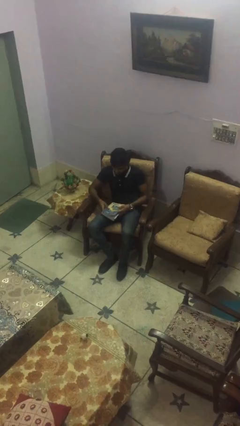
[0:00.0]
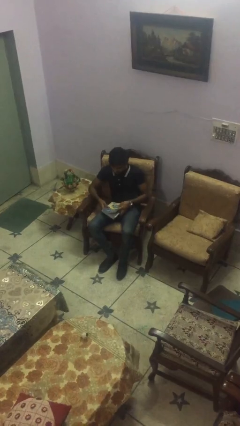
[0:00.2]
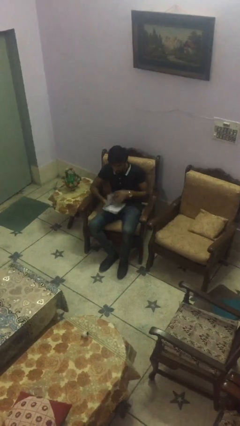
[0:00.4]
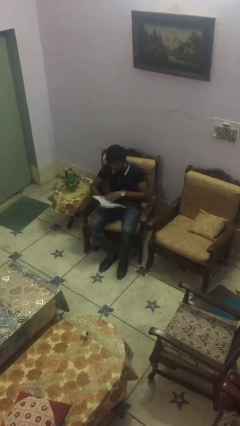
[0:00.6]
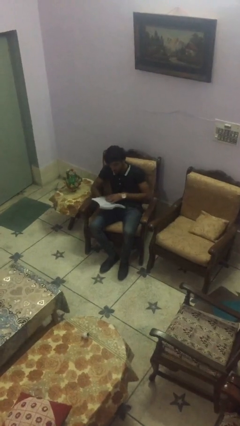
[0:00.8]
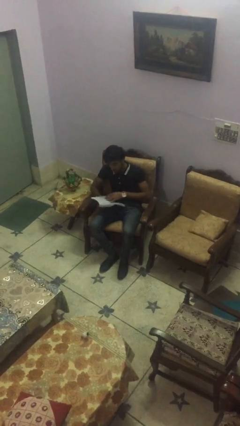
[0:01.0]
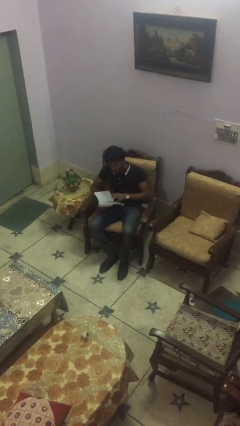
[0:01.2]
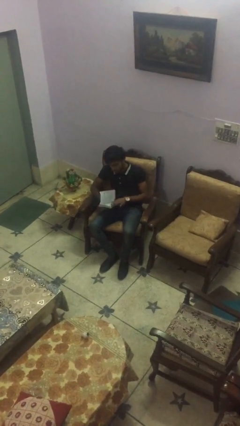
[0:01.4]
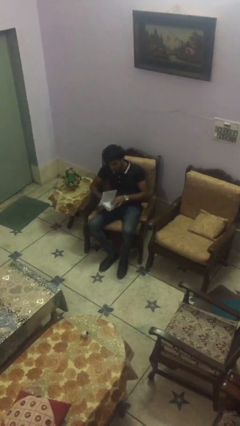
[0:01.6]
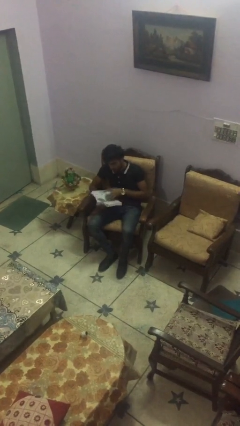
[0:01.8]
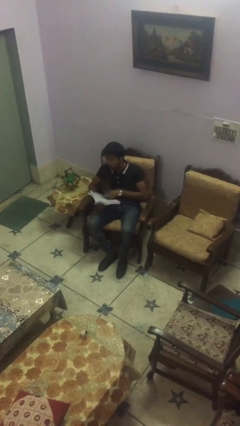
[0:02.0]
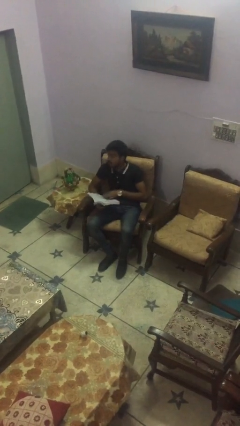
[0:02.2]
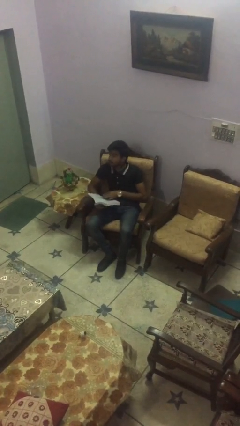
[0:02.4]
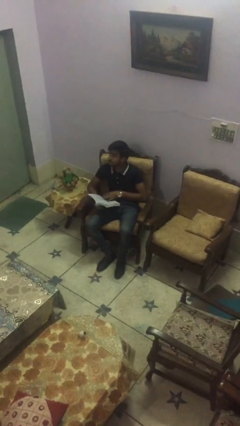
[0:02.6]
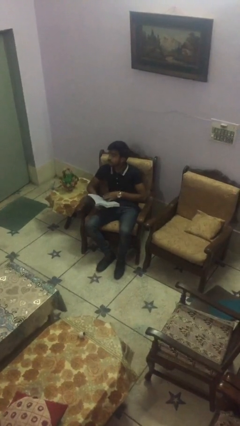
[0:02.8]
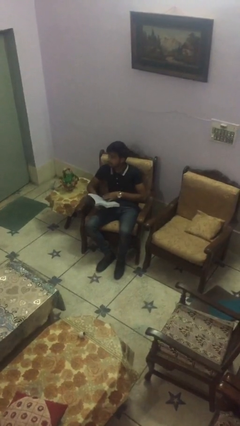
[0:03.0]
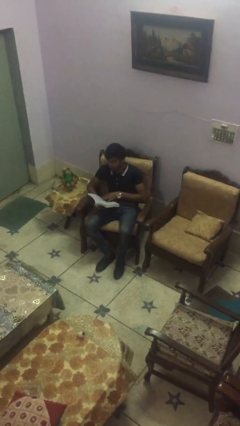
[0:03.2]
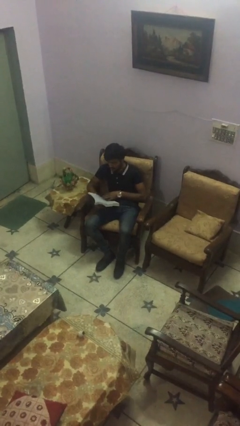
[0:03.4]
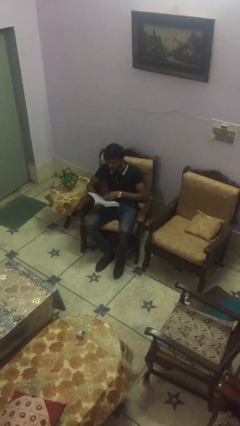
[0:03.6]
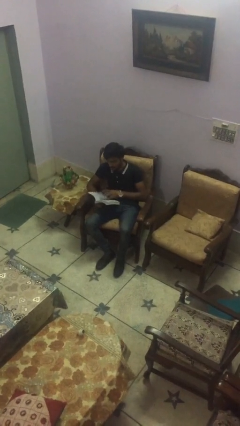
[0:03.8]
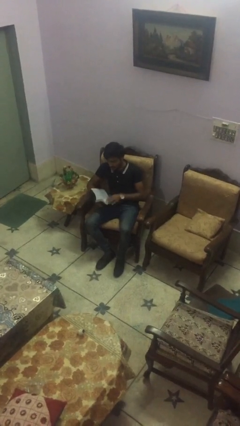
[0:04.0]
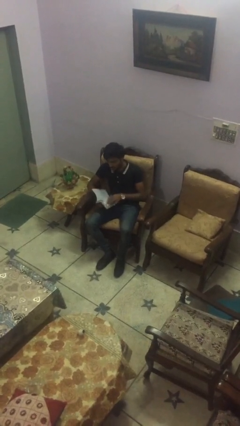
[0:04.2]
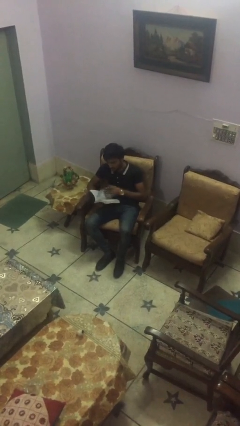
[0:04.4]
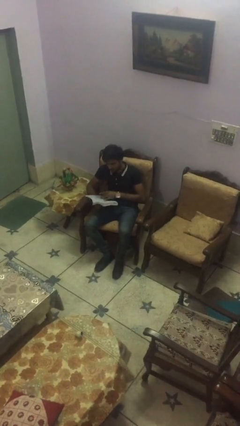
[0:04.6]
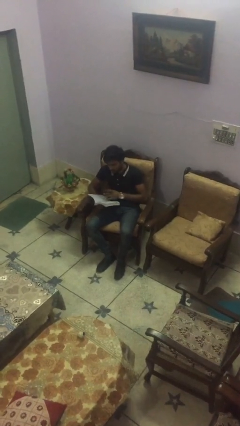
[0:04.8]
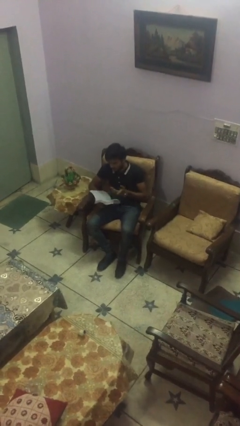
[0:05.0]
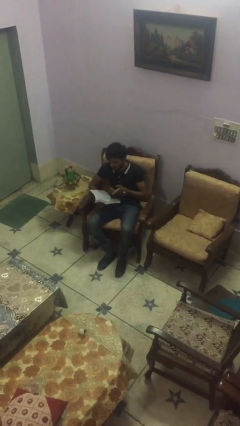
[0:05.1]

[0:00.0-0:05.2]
person reads document

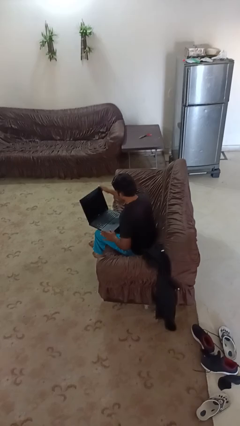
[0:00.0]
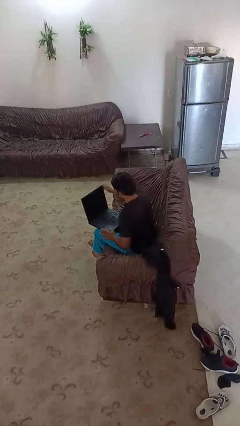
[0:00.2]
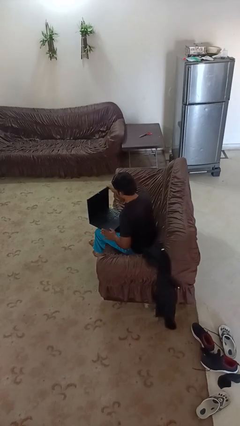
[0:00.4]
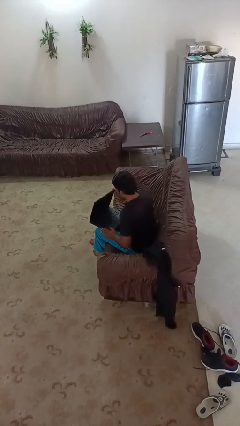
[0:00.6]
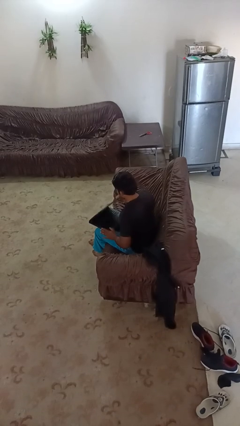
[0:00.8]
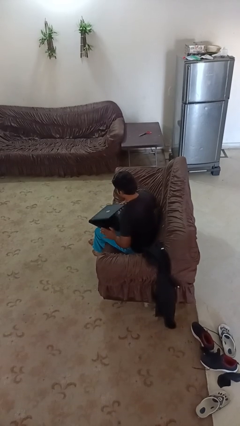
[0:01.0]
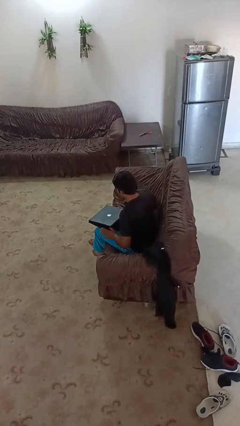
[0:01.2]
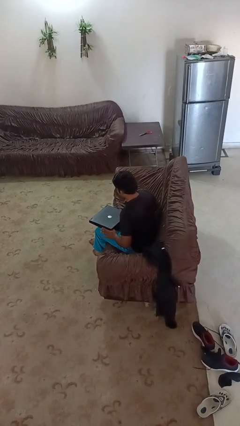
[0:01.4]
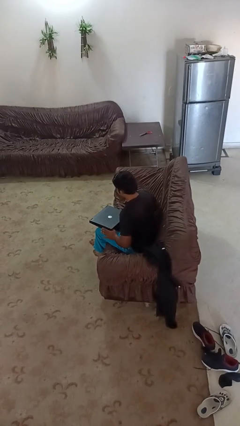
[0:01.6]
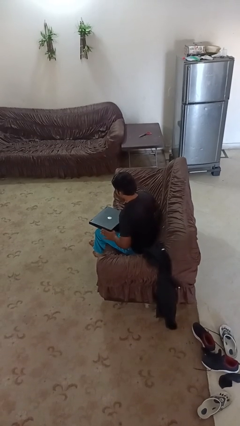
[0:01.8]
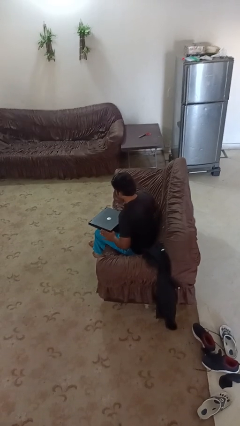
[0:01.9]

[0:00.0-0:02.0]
person closes laptop

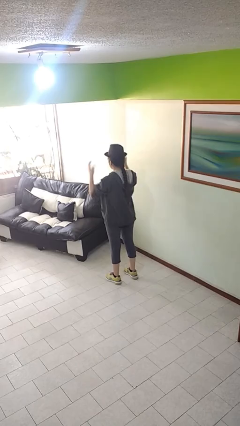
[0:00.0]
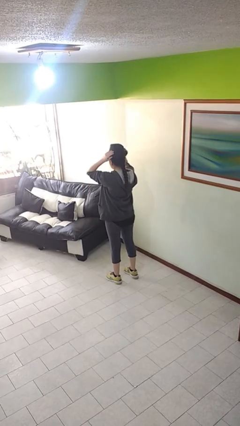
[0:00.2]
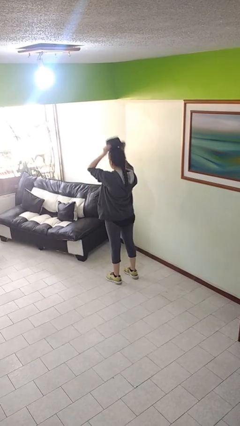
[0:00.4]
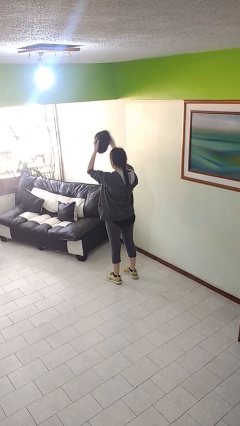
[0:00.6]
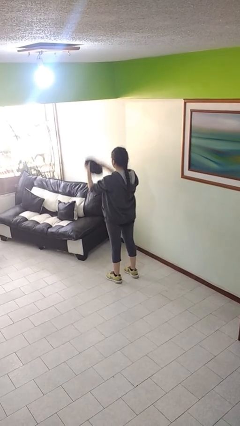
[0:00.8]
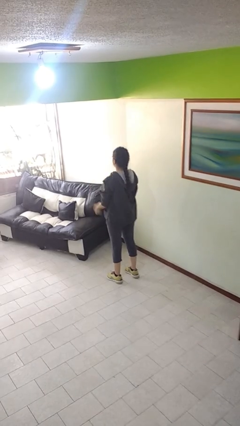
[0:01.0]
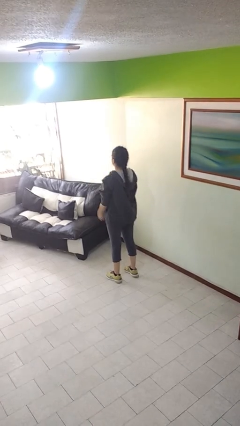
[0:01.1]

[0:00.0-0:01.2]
person takes off hat

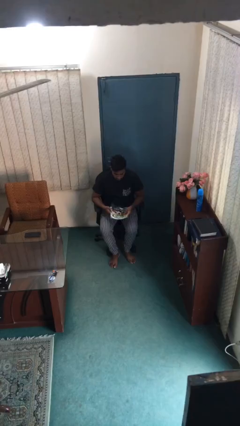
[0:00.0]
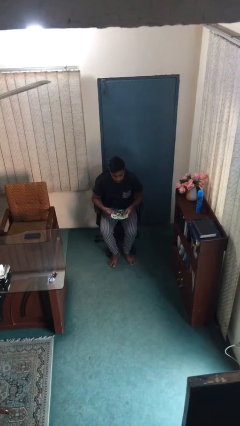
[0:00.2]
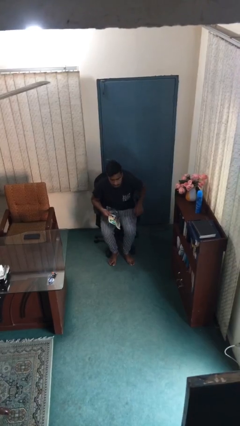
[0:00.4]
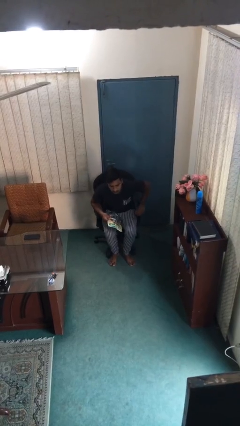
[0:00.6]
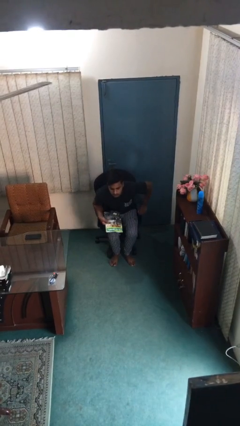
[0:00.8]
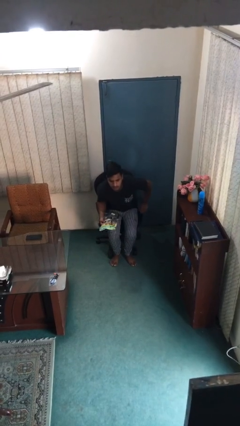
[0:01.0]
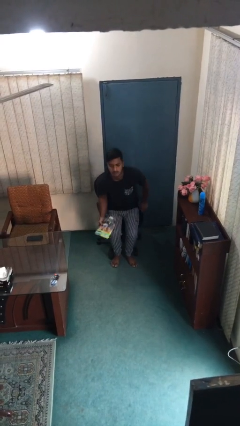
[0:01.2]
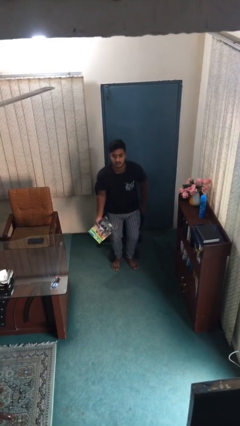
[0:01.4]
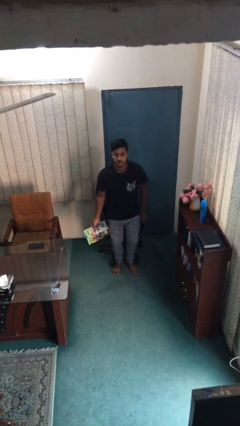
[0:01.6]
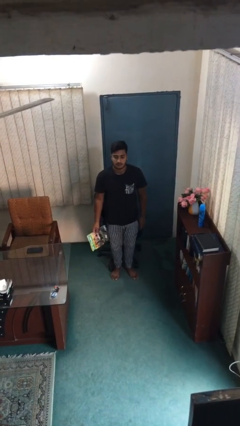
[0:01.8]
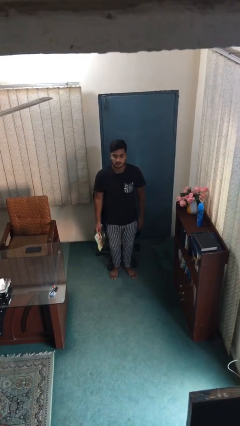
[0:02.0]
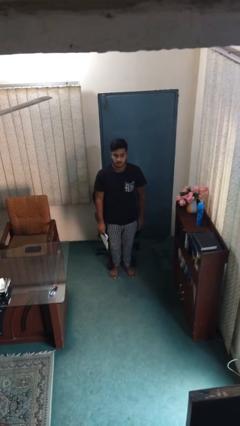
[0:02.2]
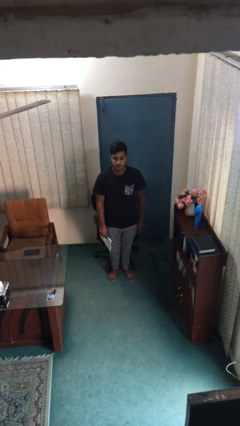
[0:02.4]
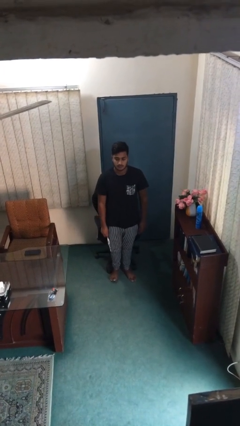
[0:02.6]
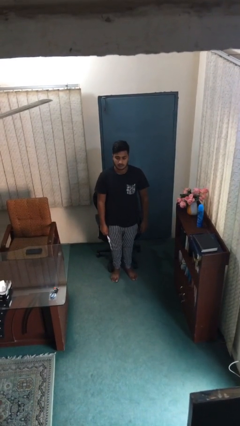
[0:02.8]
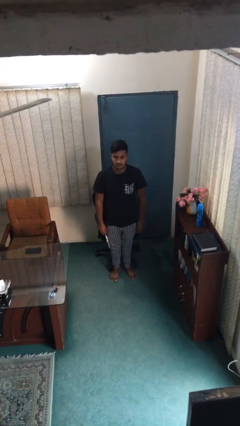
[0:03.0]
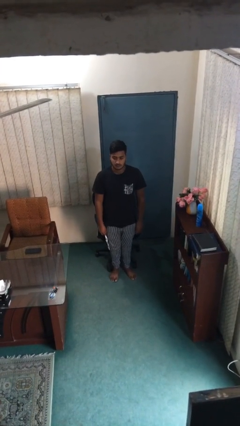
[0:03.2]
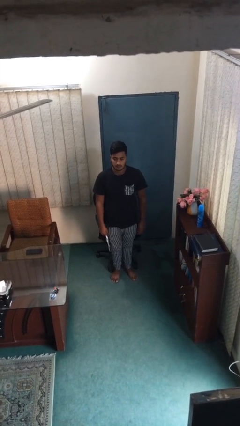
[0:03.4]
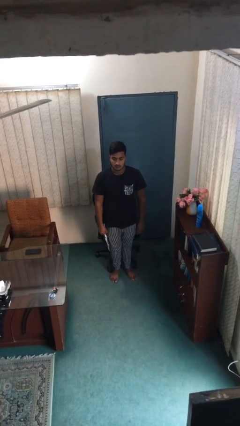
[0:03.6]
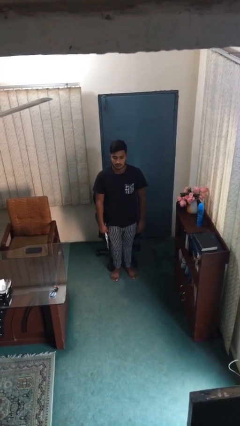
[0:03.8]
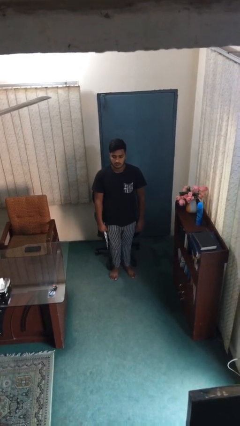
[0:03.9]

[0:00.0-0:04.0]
person stands up

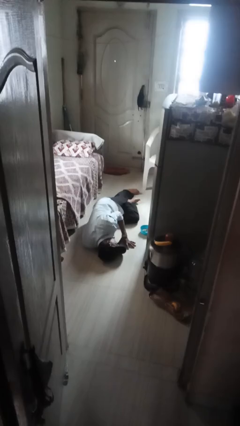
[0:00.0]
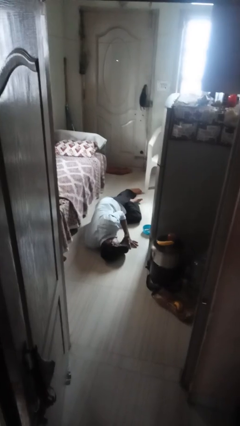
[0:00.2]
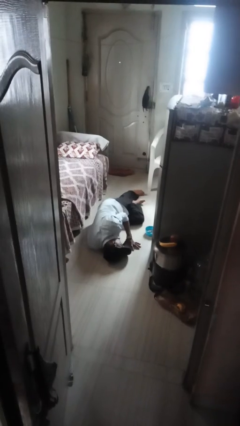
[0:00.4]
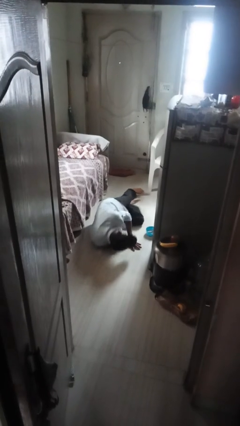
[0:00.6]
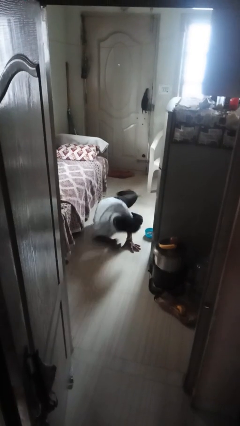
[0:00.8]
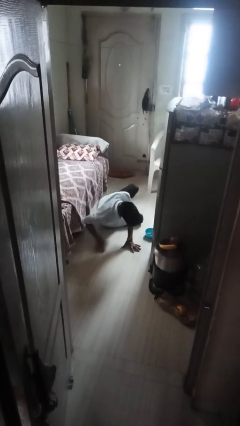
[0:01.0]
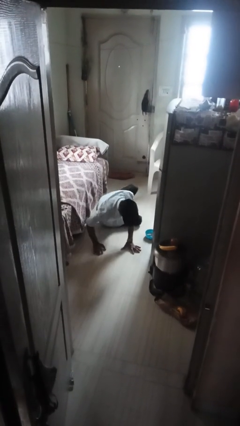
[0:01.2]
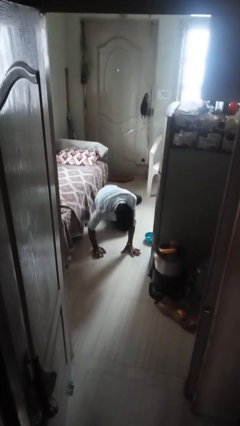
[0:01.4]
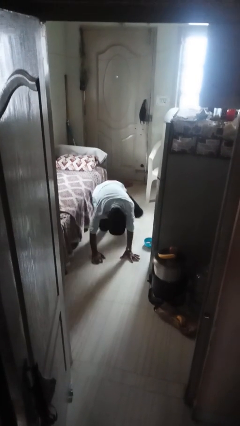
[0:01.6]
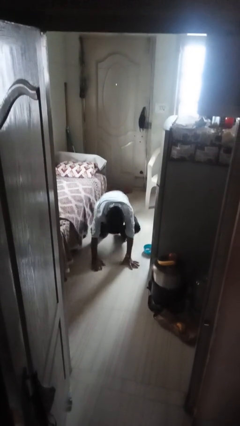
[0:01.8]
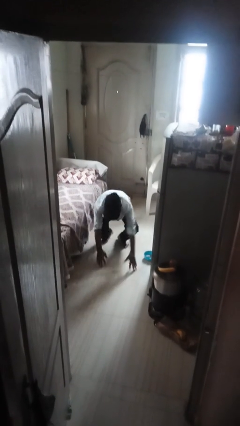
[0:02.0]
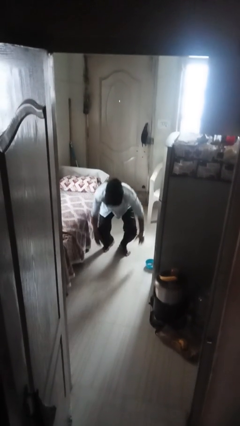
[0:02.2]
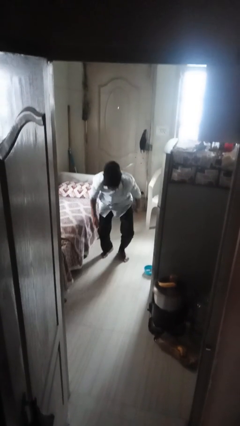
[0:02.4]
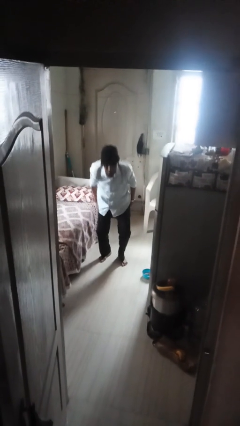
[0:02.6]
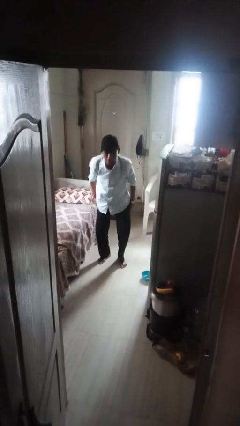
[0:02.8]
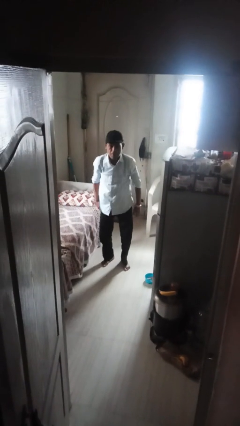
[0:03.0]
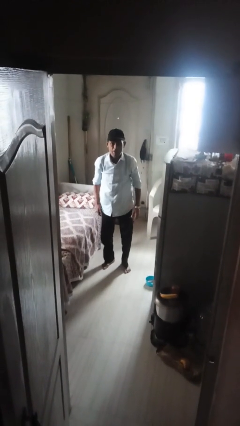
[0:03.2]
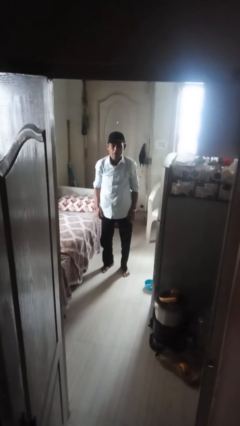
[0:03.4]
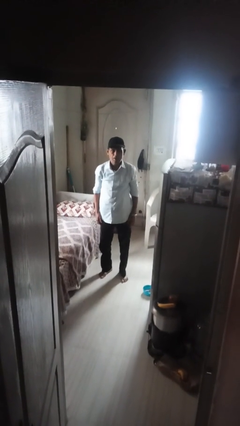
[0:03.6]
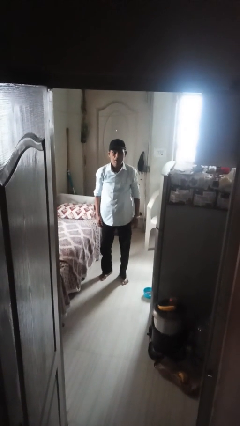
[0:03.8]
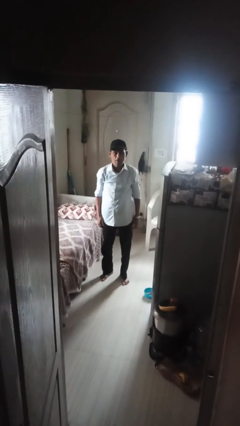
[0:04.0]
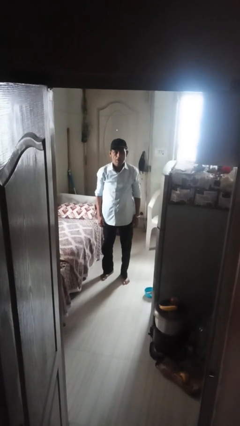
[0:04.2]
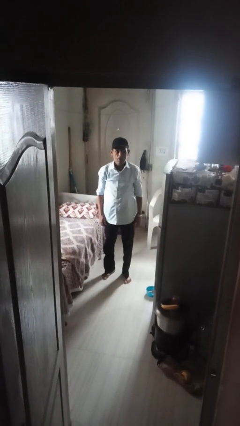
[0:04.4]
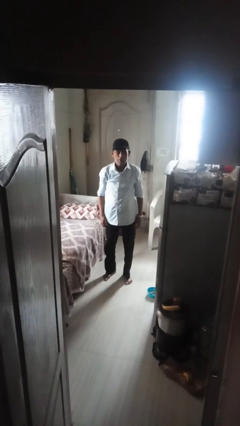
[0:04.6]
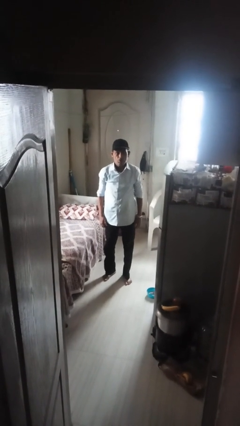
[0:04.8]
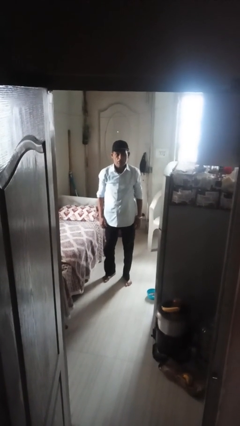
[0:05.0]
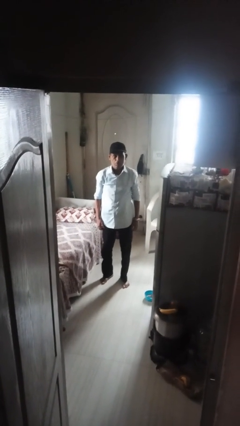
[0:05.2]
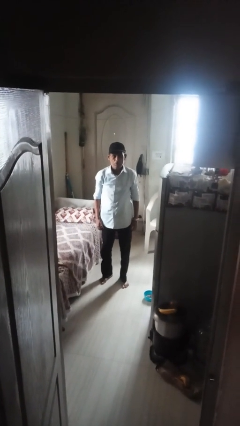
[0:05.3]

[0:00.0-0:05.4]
person stands up from floor
